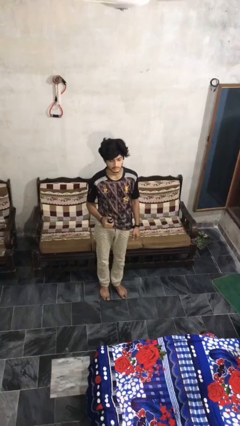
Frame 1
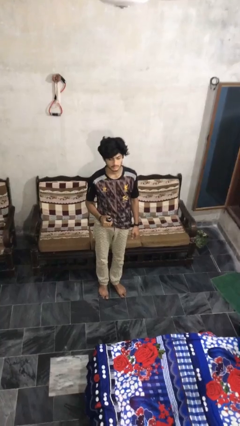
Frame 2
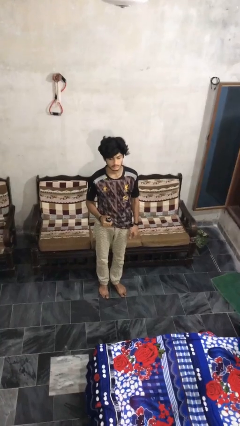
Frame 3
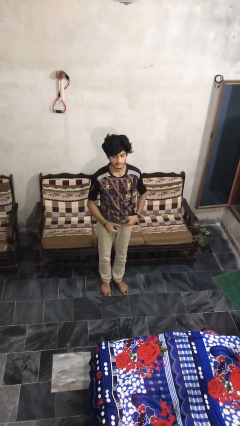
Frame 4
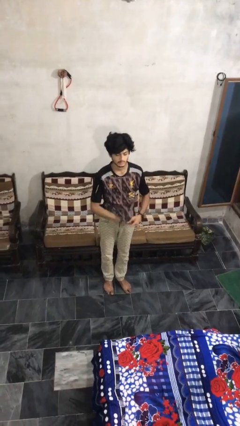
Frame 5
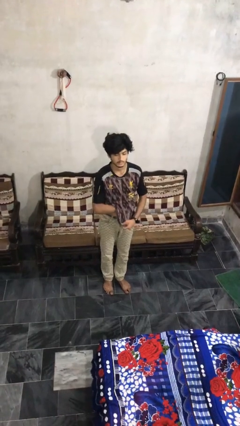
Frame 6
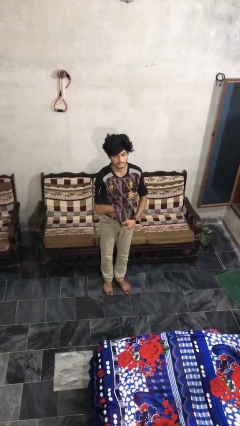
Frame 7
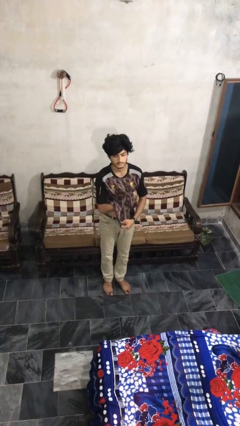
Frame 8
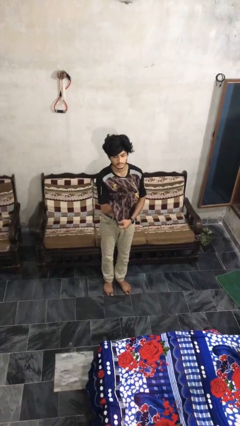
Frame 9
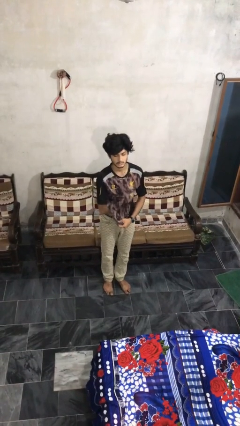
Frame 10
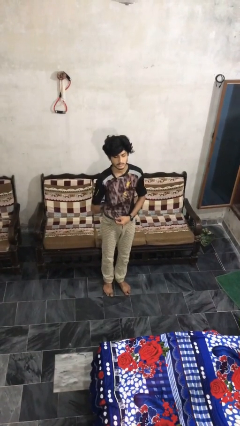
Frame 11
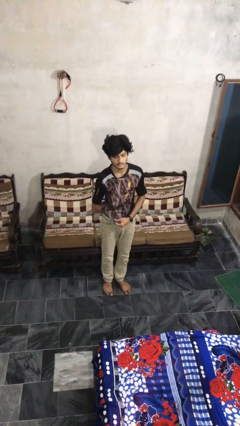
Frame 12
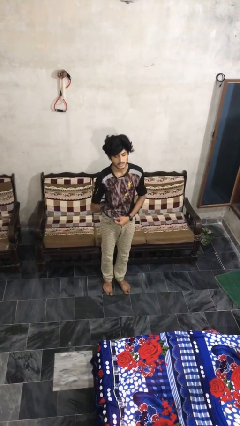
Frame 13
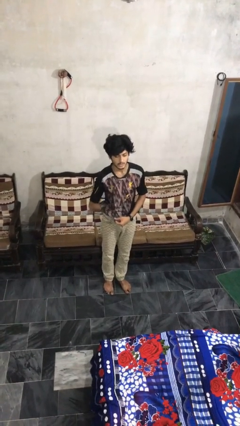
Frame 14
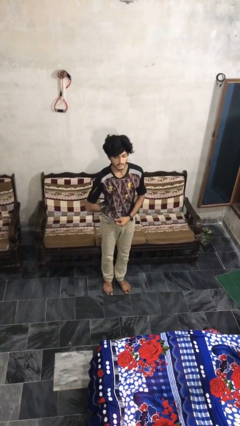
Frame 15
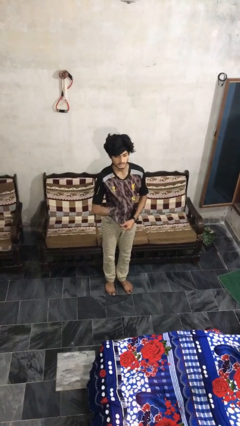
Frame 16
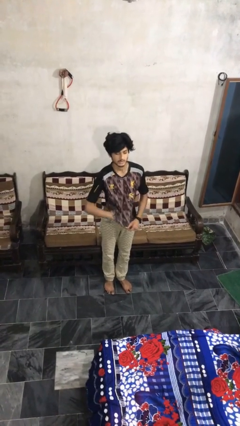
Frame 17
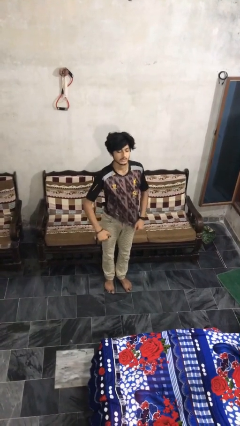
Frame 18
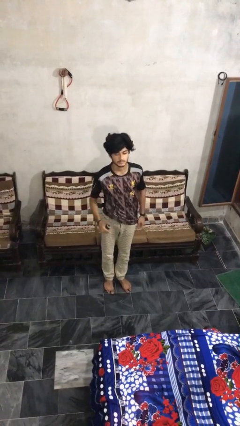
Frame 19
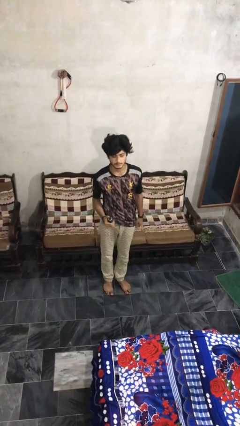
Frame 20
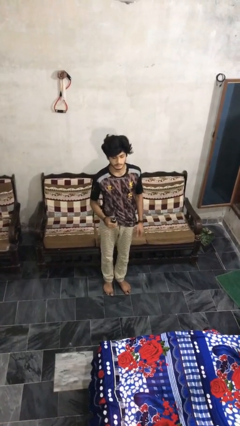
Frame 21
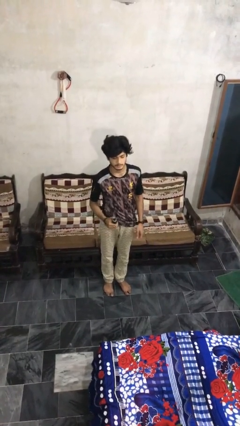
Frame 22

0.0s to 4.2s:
person applies deodorant

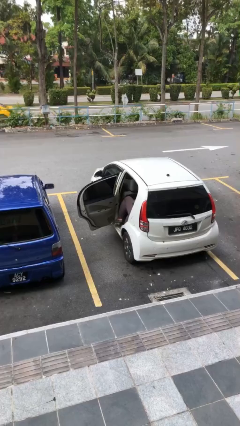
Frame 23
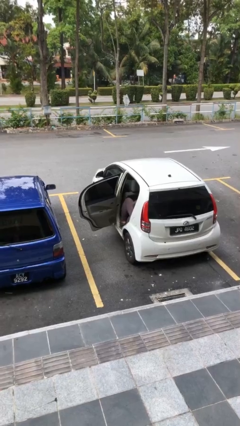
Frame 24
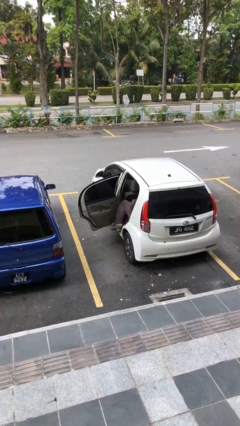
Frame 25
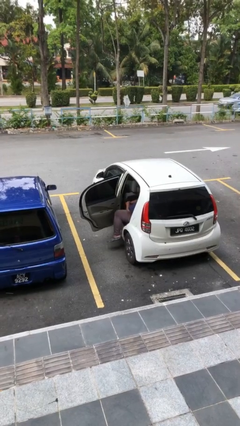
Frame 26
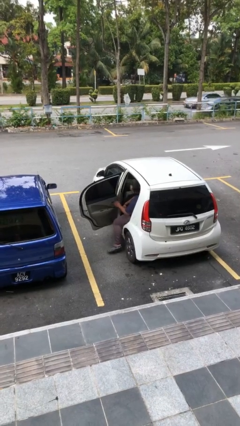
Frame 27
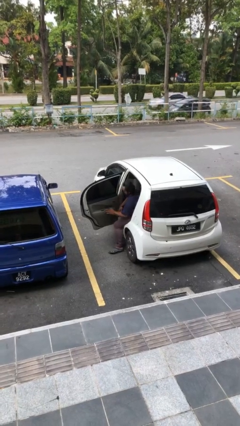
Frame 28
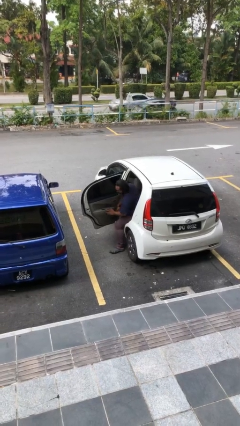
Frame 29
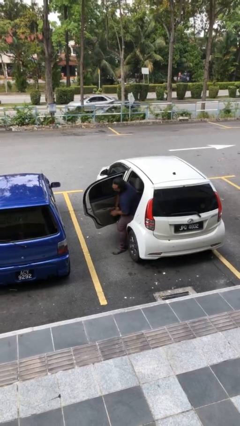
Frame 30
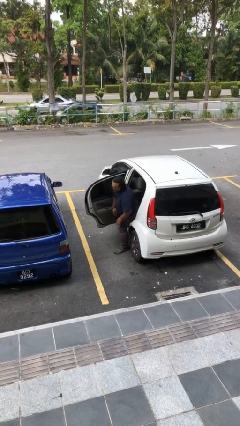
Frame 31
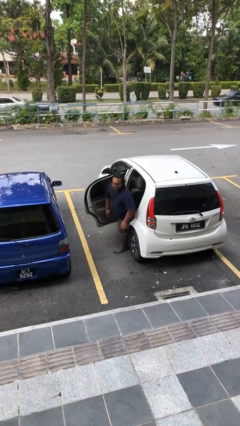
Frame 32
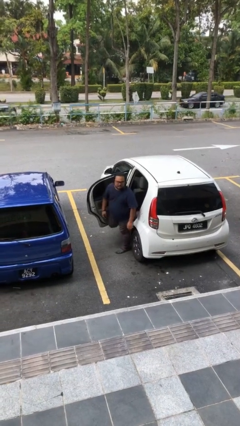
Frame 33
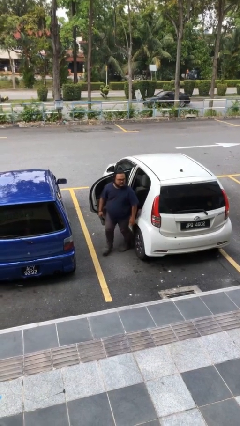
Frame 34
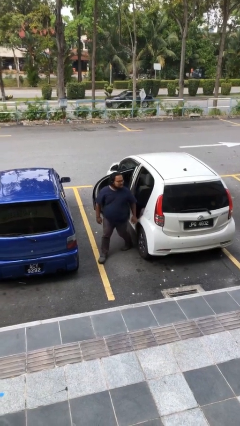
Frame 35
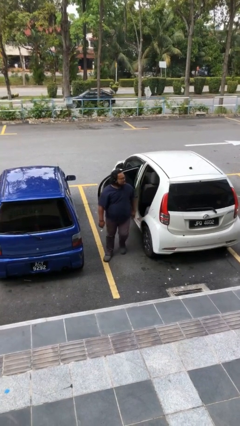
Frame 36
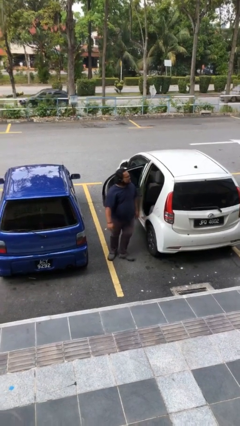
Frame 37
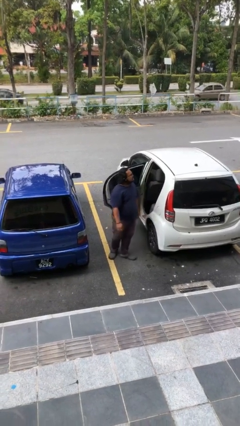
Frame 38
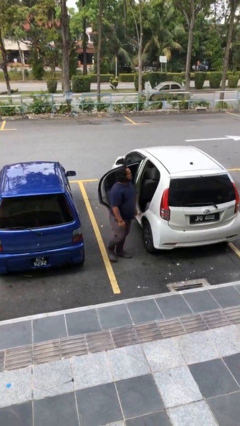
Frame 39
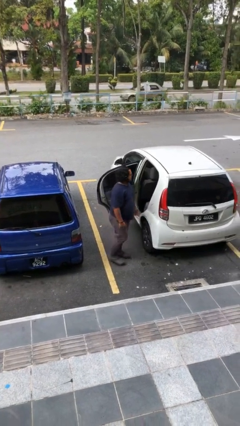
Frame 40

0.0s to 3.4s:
person exits car

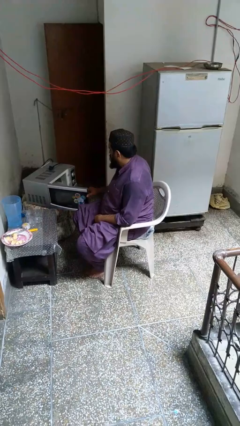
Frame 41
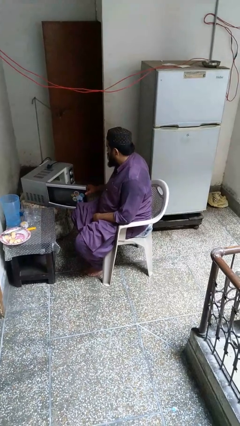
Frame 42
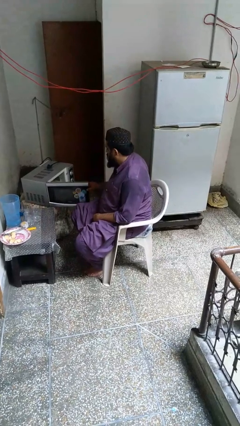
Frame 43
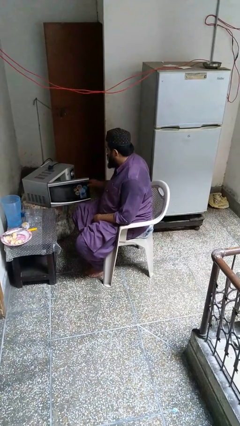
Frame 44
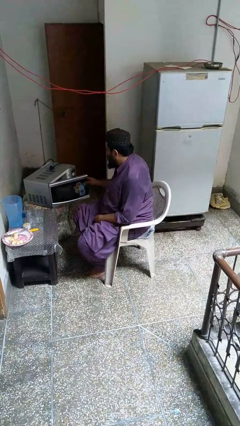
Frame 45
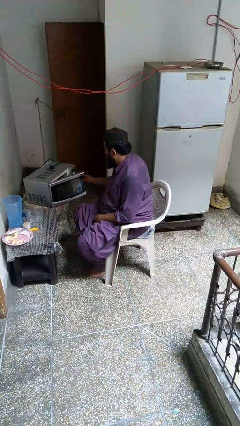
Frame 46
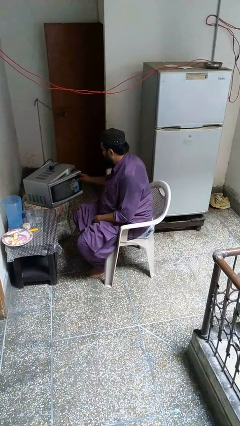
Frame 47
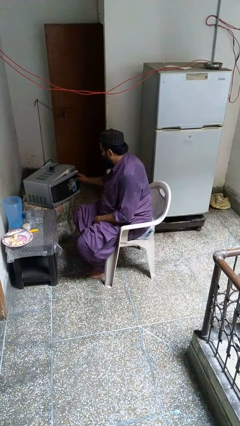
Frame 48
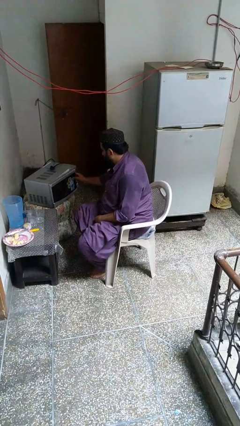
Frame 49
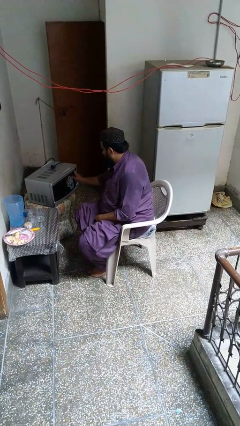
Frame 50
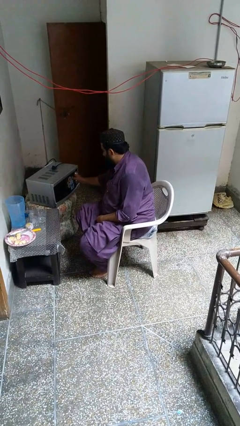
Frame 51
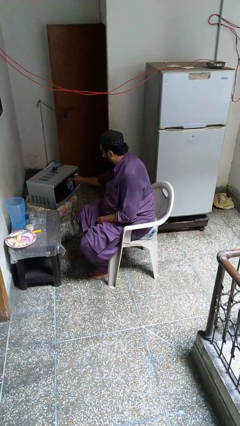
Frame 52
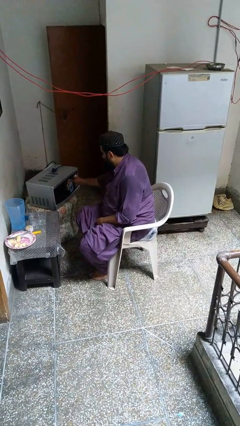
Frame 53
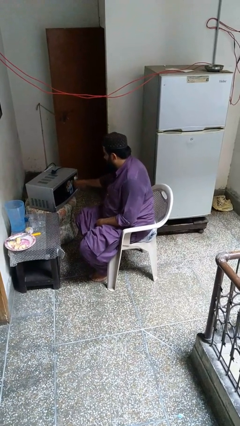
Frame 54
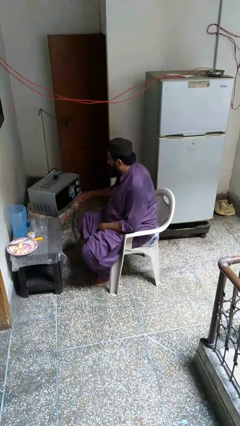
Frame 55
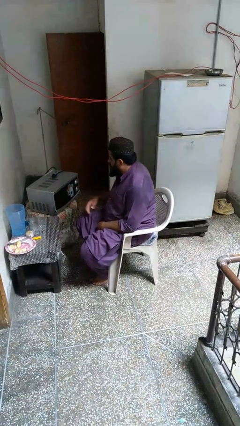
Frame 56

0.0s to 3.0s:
person closes microwave

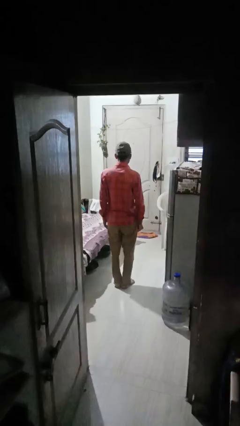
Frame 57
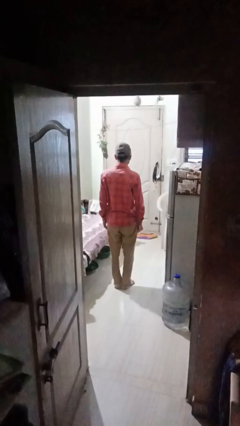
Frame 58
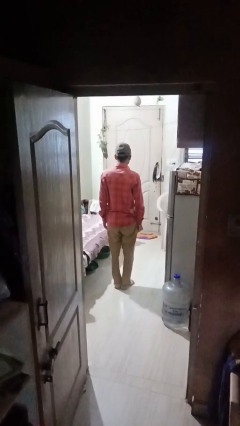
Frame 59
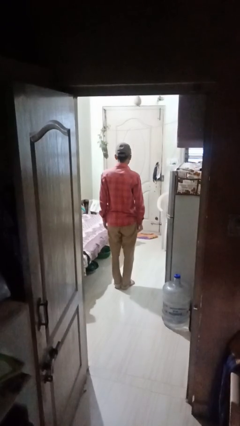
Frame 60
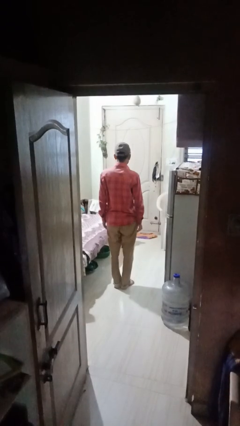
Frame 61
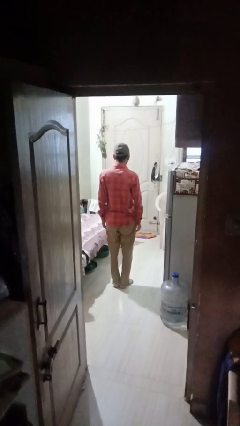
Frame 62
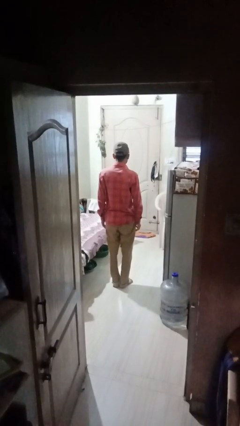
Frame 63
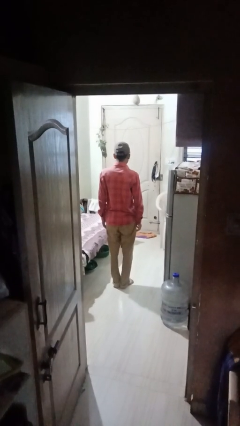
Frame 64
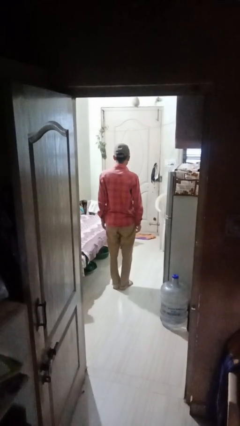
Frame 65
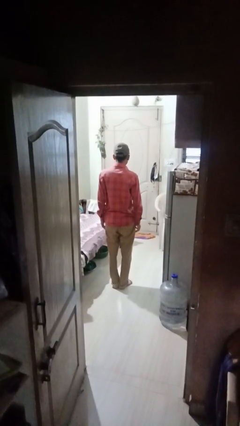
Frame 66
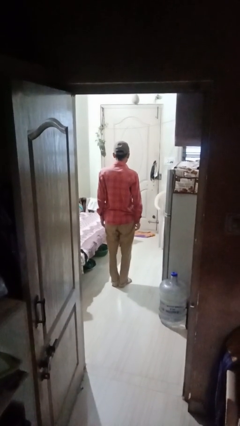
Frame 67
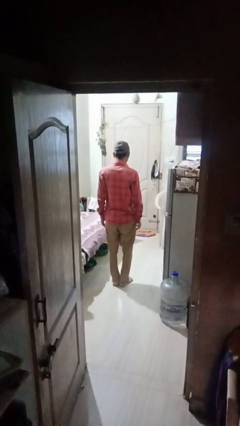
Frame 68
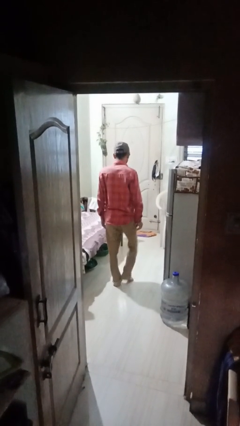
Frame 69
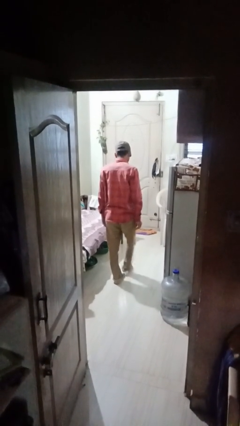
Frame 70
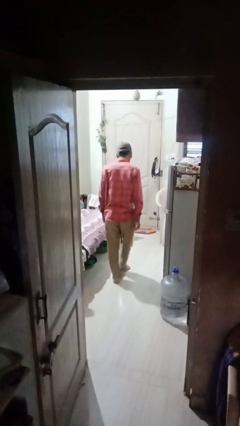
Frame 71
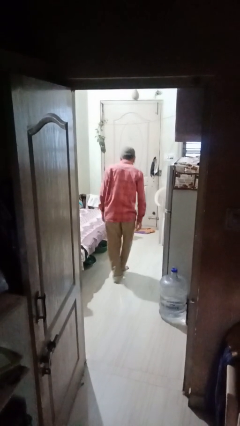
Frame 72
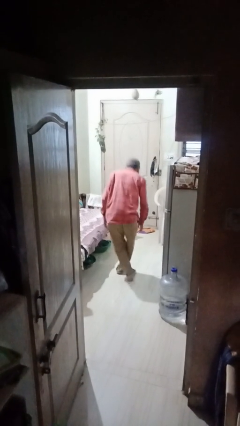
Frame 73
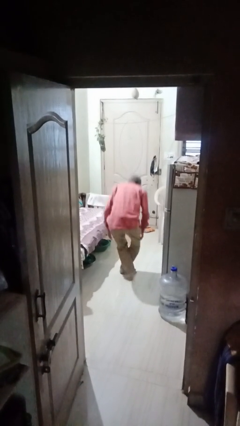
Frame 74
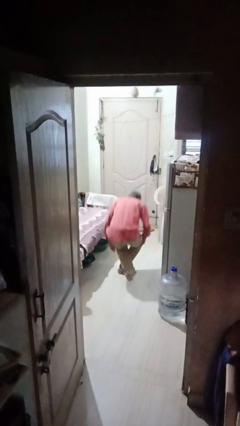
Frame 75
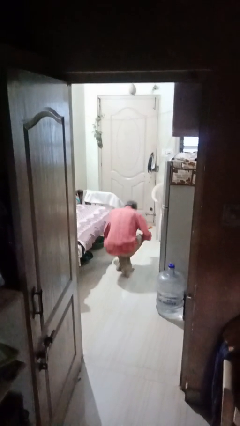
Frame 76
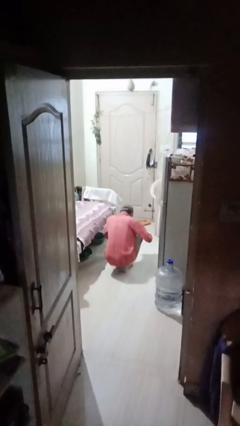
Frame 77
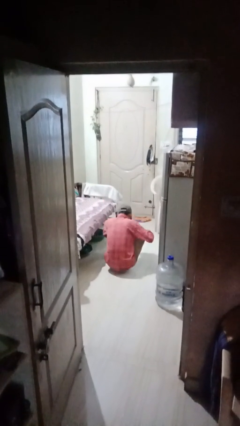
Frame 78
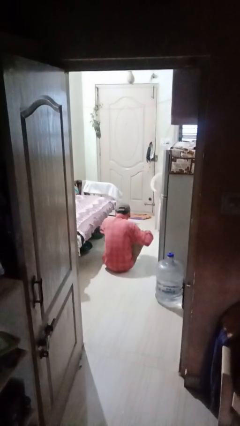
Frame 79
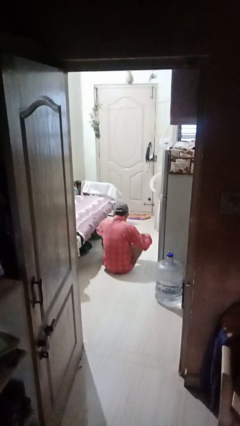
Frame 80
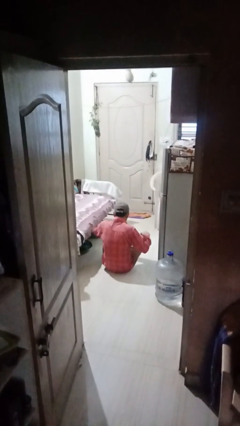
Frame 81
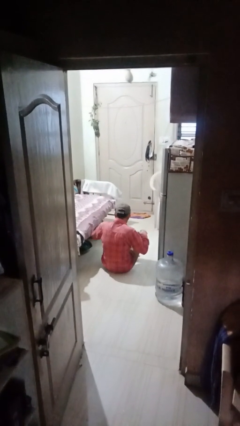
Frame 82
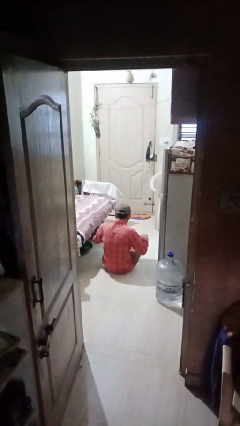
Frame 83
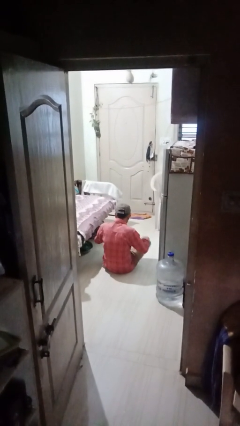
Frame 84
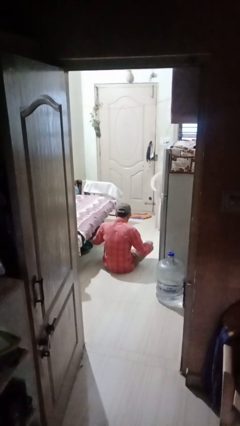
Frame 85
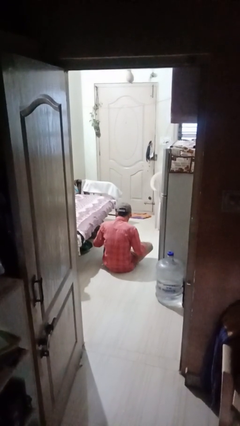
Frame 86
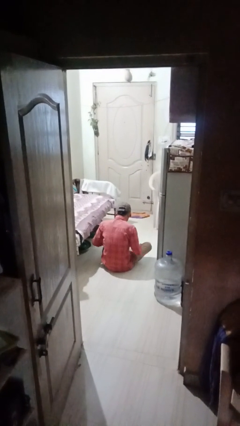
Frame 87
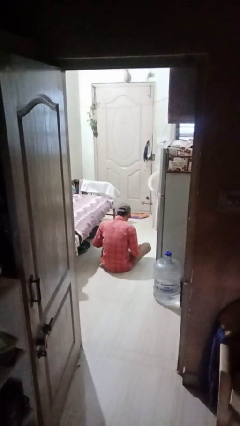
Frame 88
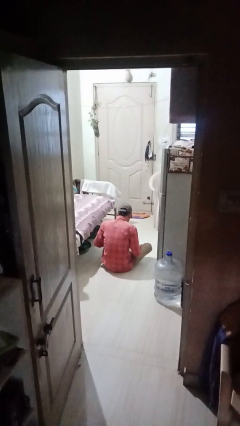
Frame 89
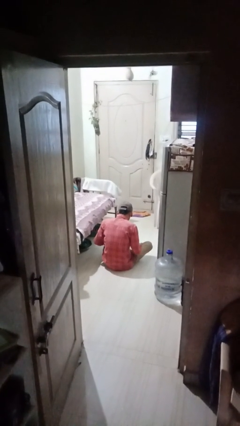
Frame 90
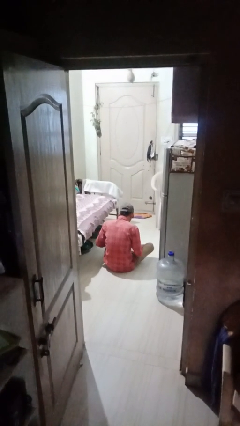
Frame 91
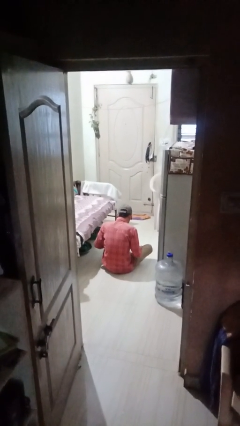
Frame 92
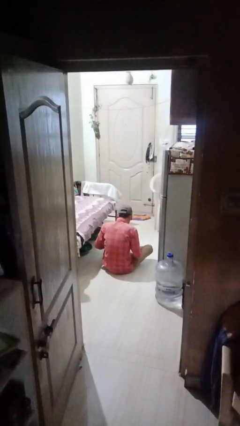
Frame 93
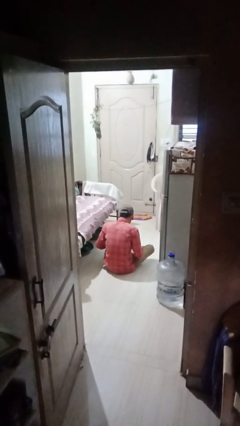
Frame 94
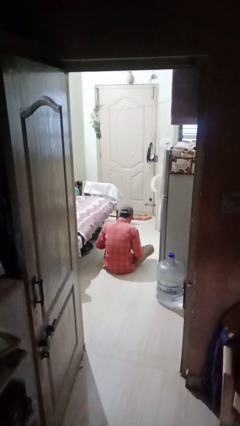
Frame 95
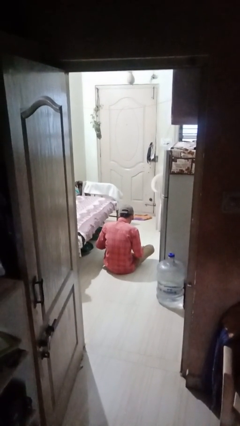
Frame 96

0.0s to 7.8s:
person sits crisscross
